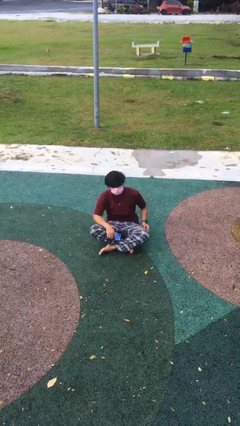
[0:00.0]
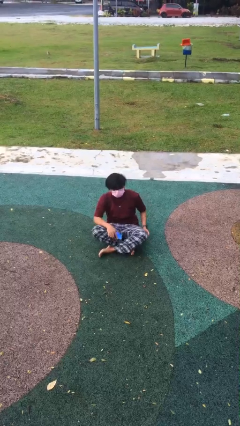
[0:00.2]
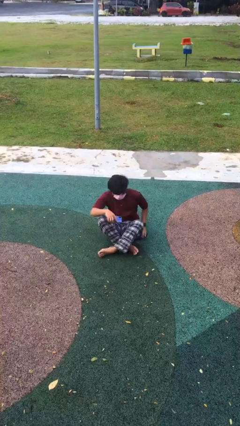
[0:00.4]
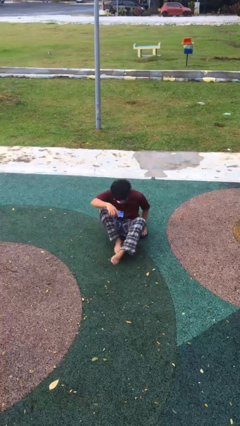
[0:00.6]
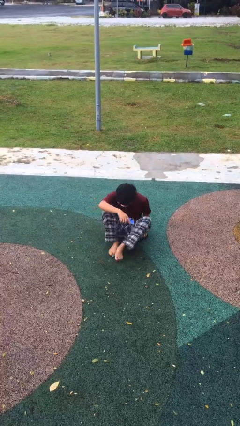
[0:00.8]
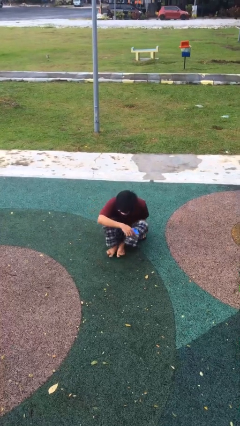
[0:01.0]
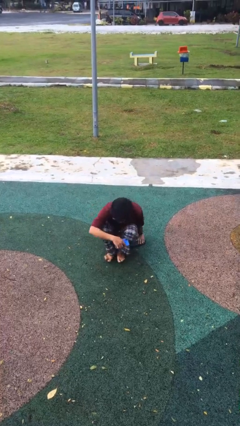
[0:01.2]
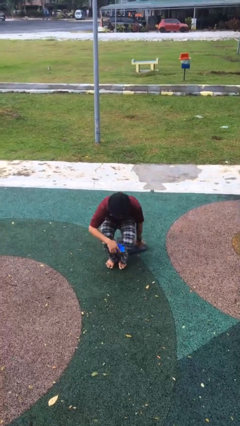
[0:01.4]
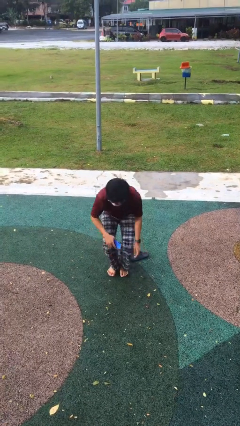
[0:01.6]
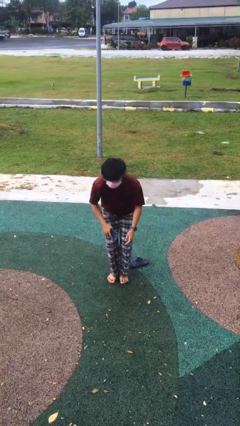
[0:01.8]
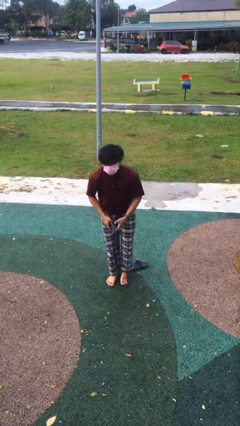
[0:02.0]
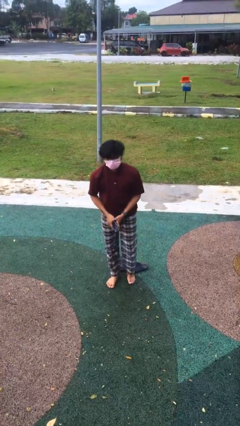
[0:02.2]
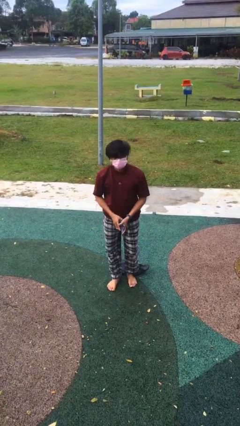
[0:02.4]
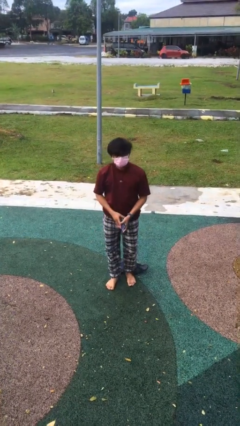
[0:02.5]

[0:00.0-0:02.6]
person stands up from floor

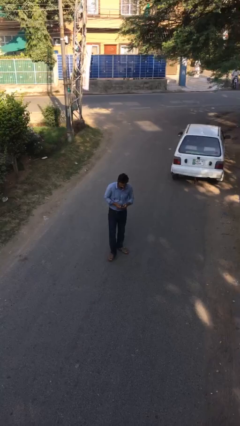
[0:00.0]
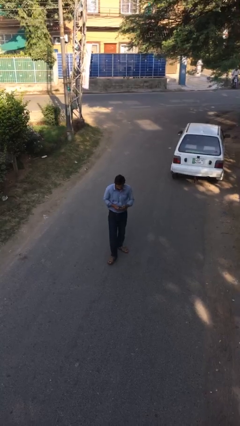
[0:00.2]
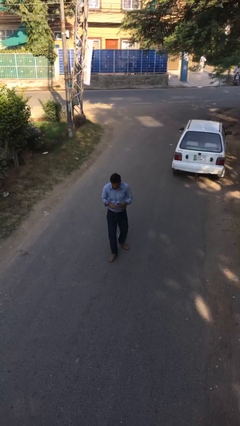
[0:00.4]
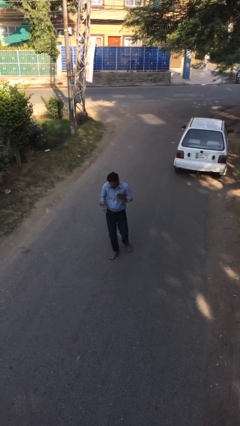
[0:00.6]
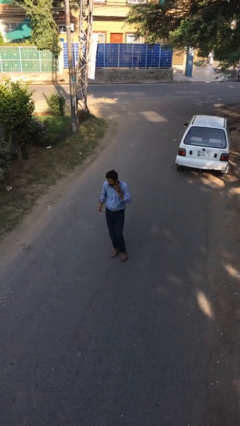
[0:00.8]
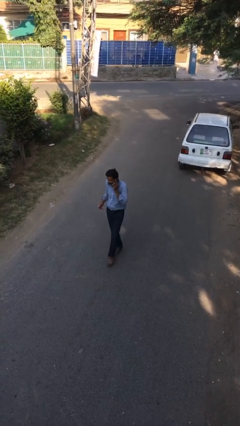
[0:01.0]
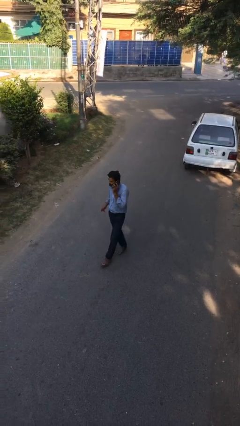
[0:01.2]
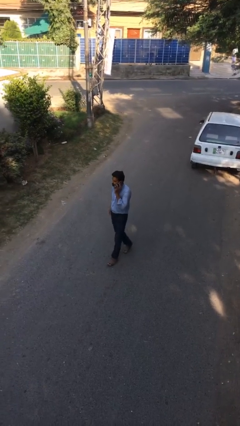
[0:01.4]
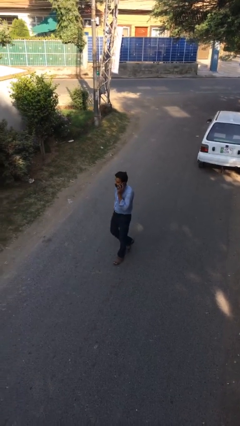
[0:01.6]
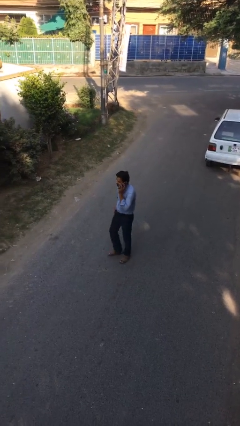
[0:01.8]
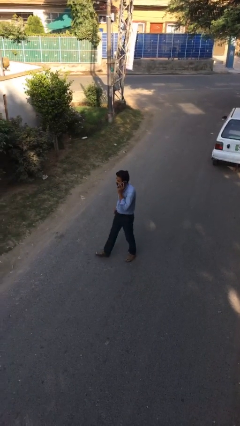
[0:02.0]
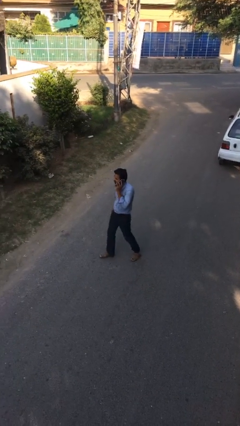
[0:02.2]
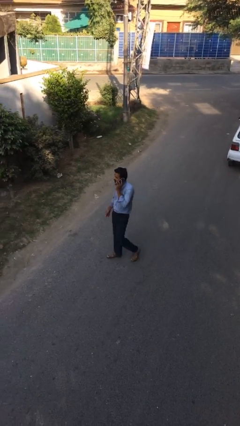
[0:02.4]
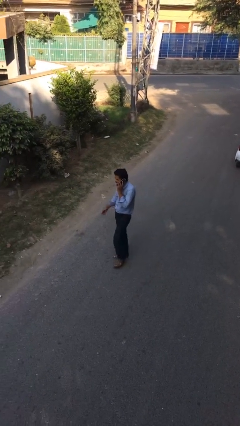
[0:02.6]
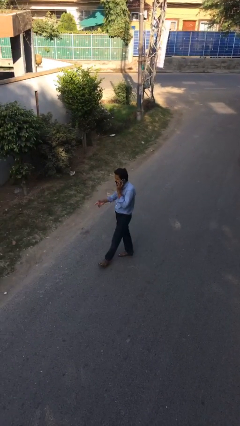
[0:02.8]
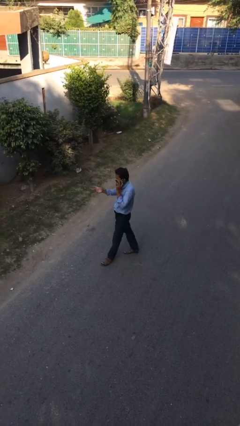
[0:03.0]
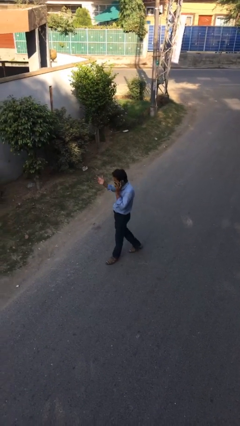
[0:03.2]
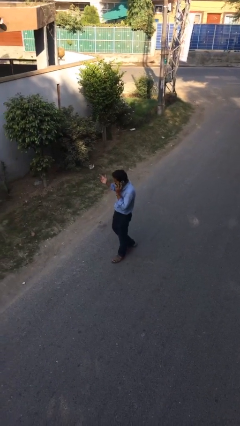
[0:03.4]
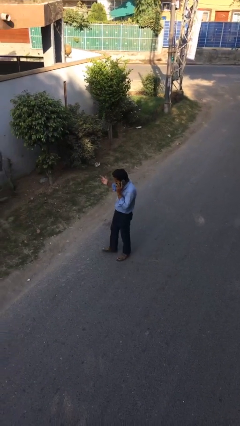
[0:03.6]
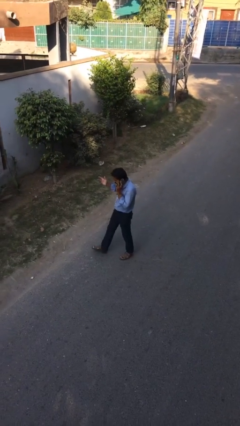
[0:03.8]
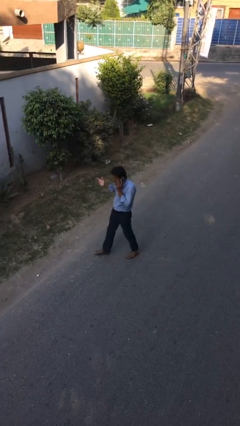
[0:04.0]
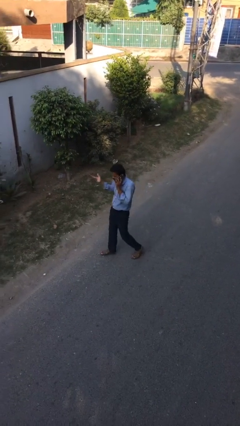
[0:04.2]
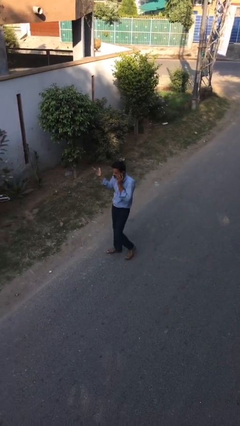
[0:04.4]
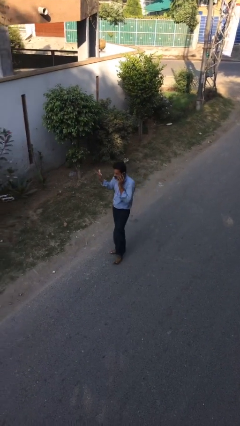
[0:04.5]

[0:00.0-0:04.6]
person talks on phone

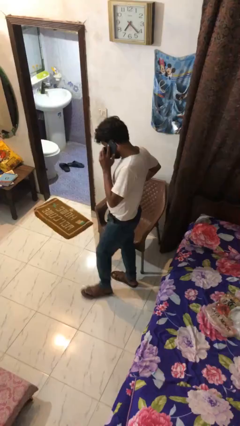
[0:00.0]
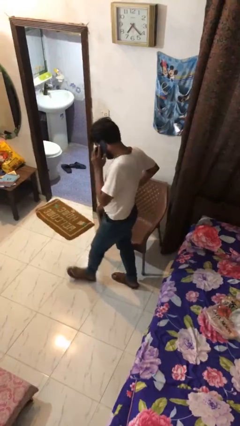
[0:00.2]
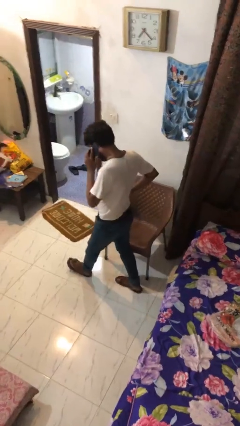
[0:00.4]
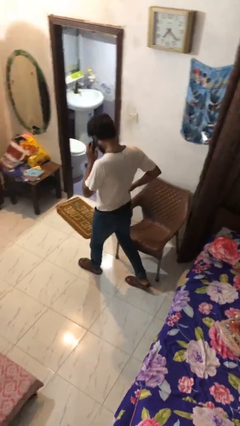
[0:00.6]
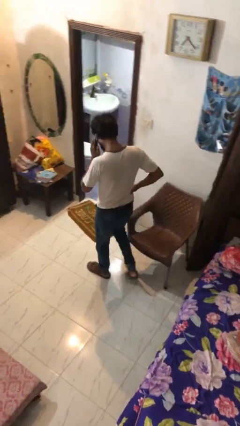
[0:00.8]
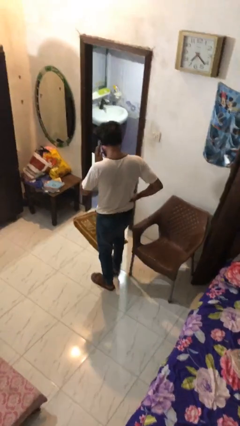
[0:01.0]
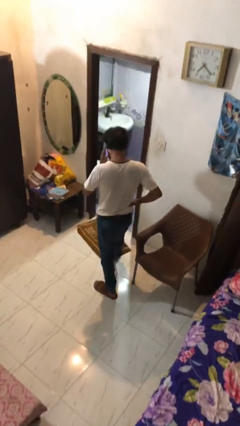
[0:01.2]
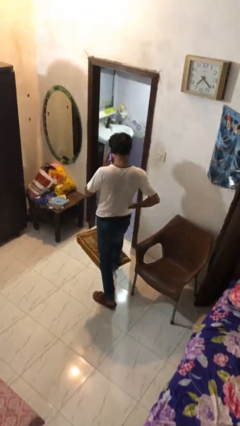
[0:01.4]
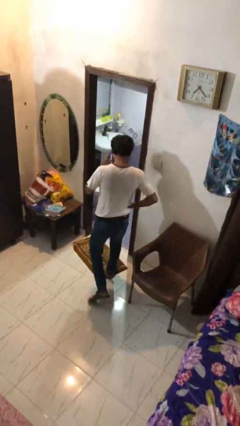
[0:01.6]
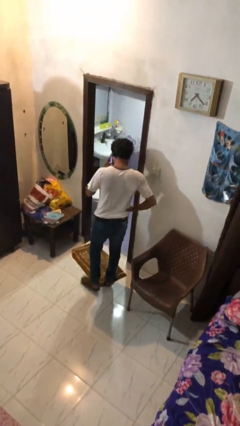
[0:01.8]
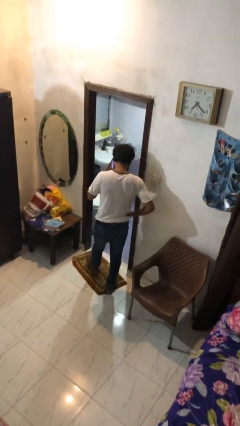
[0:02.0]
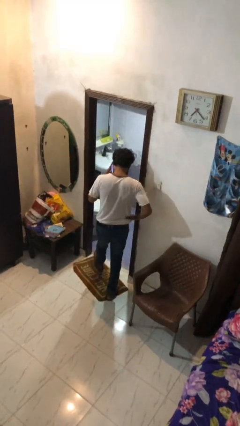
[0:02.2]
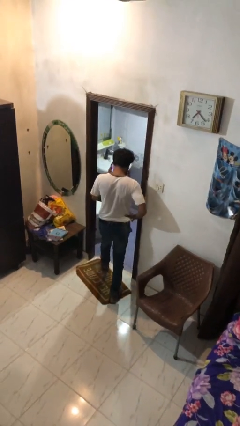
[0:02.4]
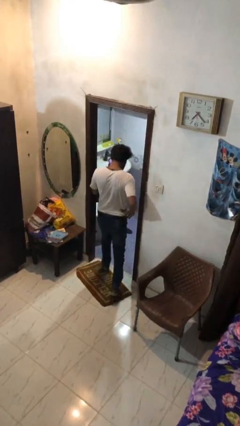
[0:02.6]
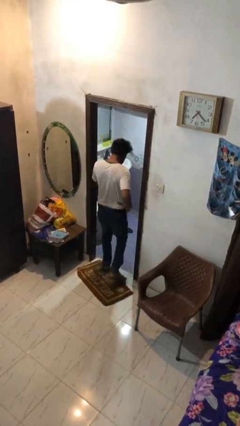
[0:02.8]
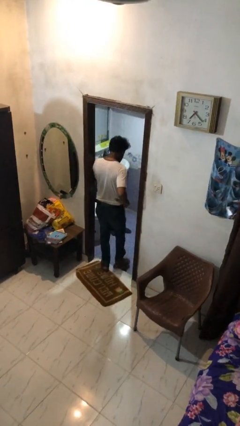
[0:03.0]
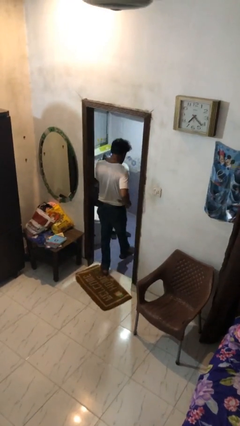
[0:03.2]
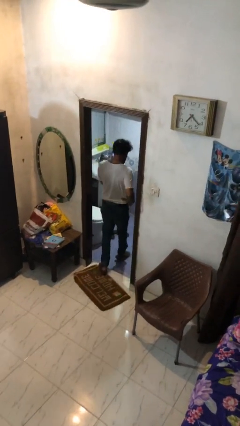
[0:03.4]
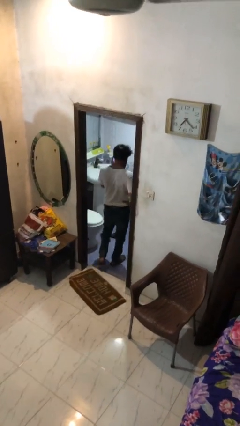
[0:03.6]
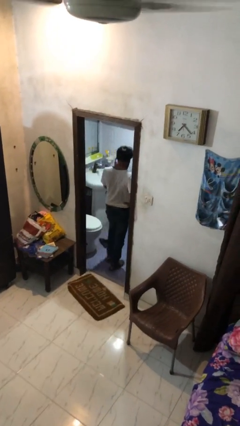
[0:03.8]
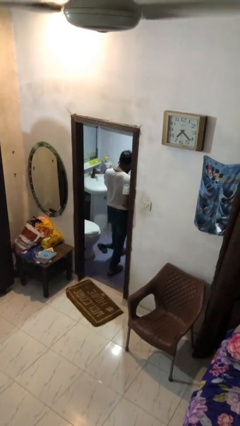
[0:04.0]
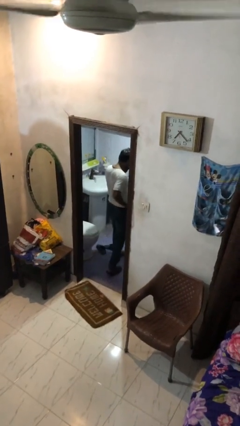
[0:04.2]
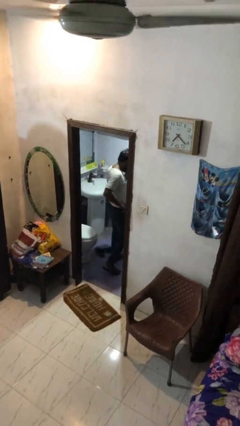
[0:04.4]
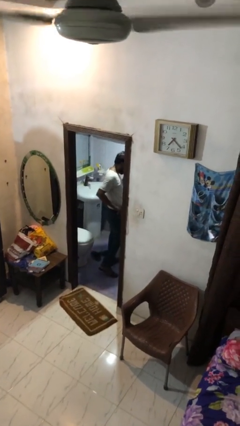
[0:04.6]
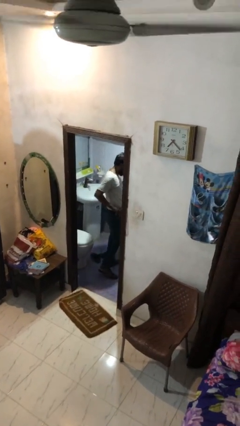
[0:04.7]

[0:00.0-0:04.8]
person exits scene through structure

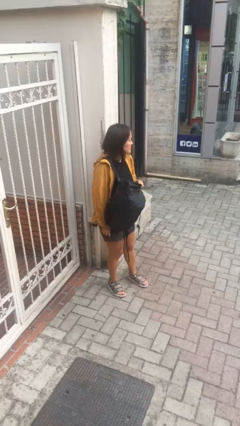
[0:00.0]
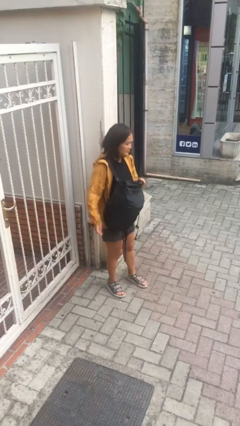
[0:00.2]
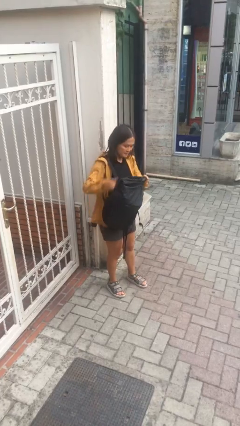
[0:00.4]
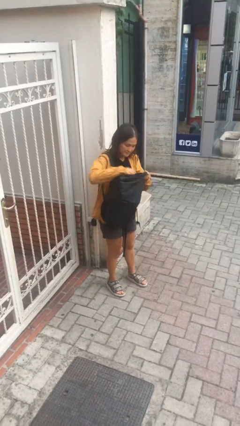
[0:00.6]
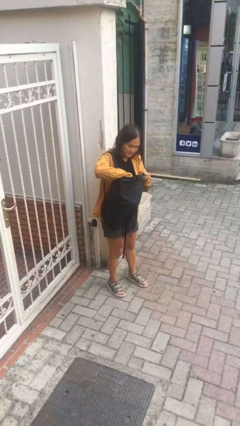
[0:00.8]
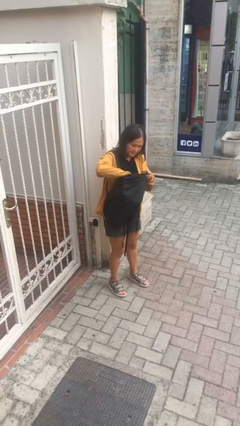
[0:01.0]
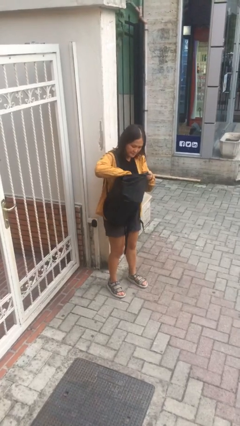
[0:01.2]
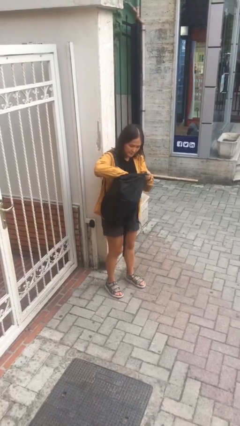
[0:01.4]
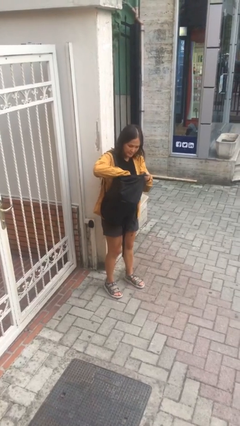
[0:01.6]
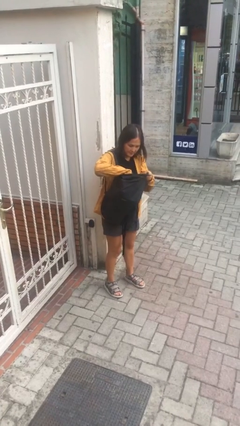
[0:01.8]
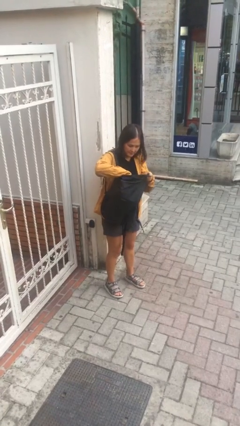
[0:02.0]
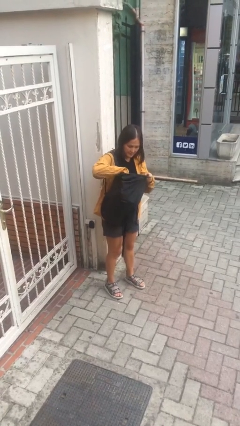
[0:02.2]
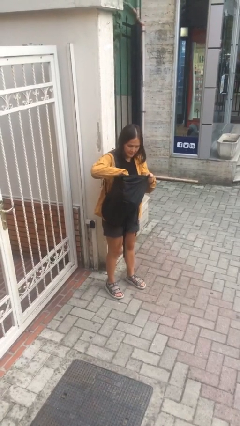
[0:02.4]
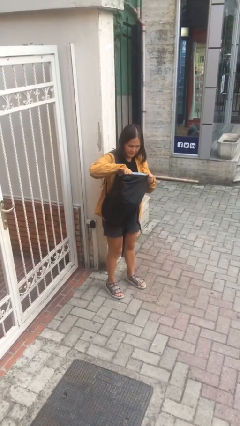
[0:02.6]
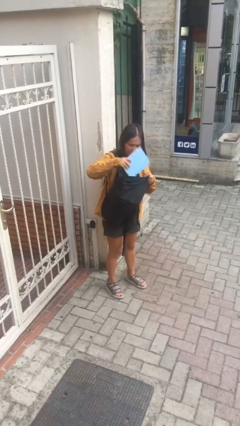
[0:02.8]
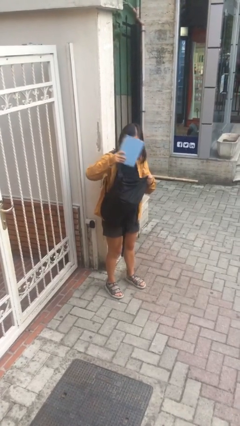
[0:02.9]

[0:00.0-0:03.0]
person searches in backpack

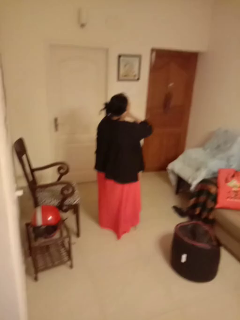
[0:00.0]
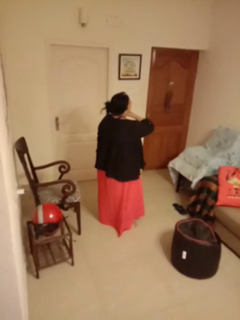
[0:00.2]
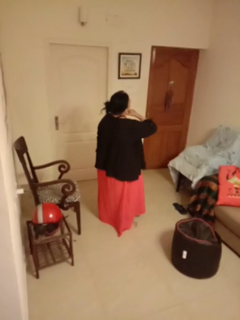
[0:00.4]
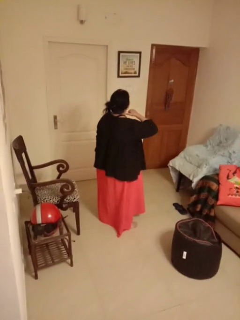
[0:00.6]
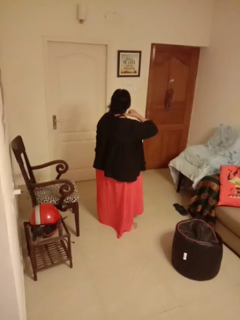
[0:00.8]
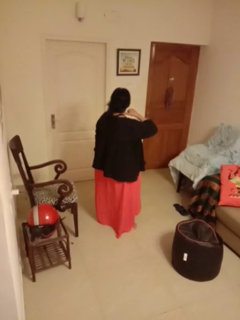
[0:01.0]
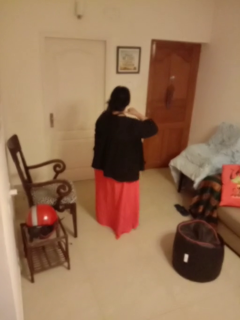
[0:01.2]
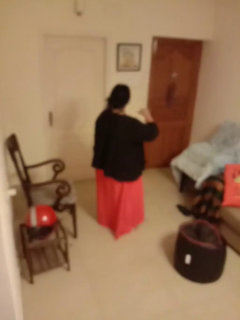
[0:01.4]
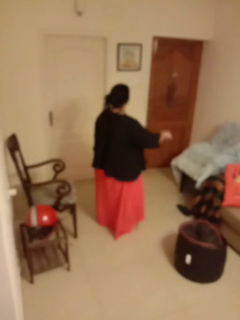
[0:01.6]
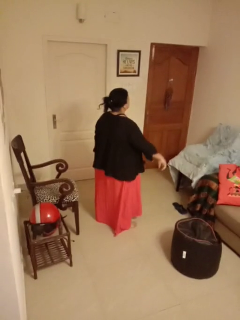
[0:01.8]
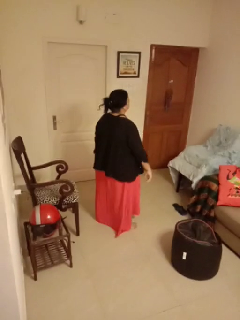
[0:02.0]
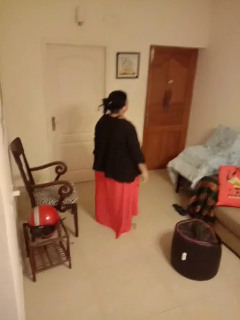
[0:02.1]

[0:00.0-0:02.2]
person gestures cut

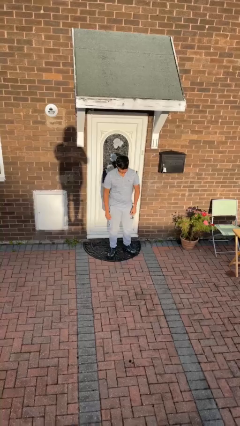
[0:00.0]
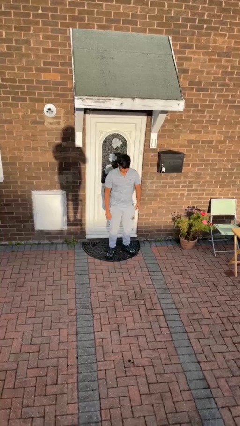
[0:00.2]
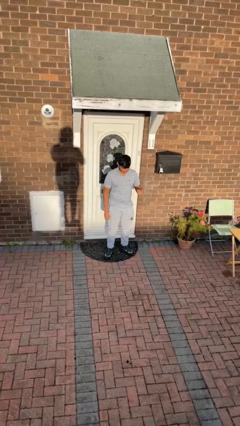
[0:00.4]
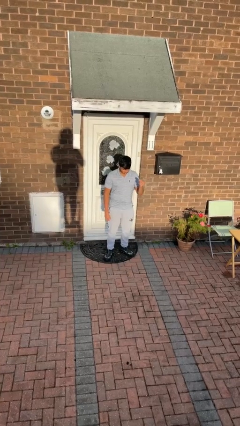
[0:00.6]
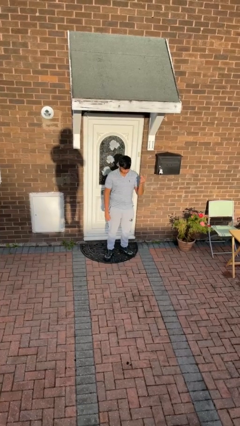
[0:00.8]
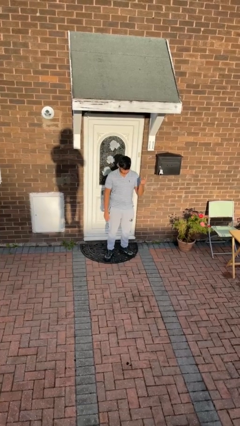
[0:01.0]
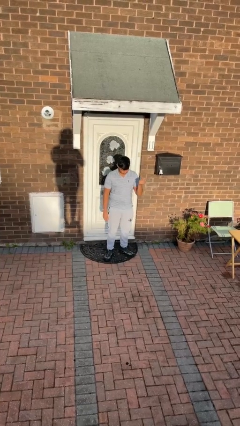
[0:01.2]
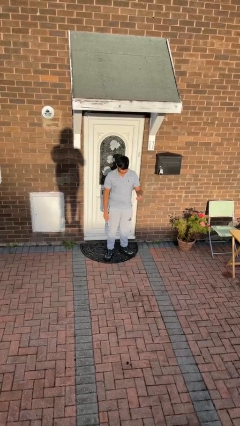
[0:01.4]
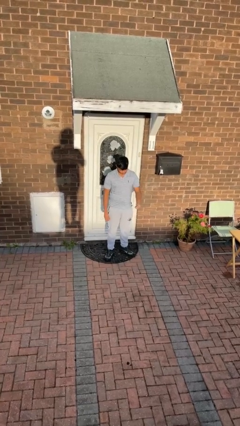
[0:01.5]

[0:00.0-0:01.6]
person snaps fingers
